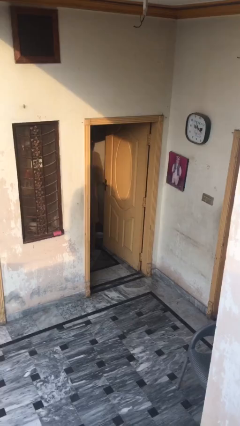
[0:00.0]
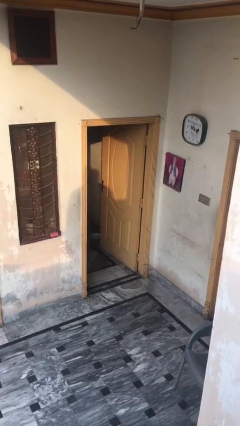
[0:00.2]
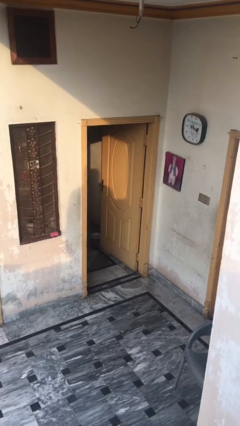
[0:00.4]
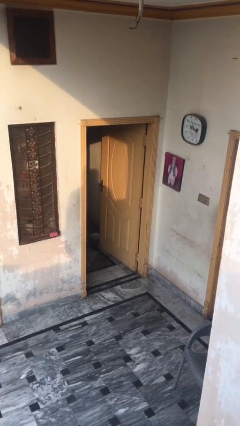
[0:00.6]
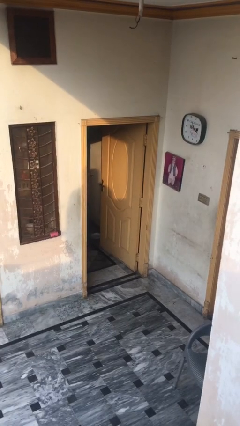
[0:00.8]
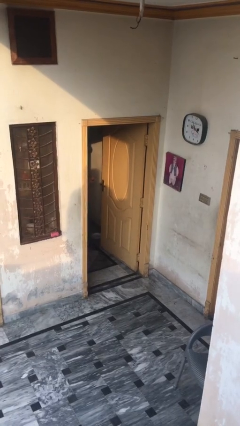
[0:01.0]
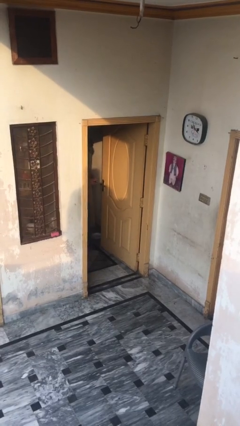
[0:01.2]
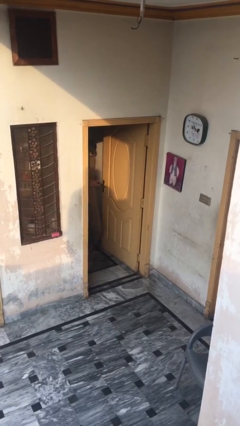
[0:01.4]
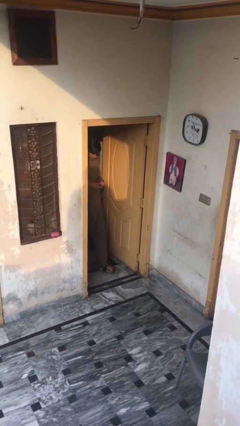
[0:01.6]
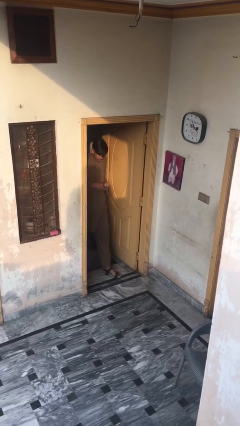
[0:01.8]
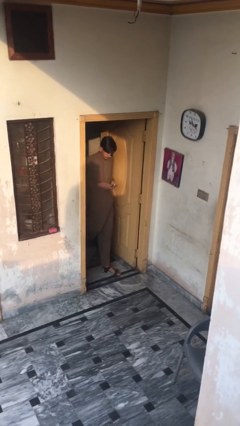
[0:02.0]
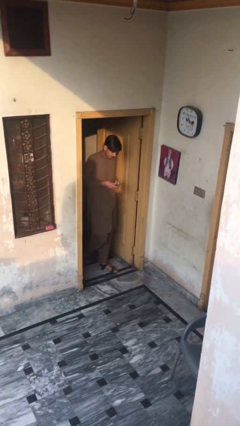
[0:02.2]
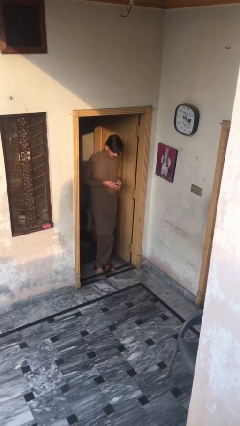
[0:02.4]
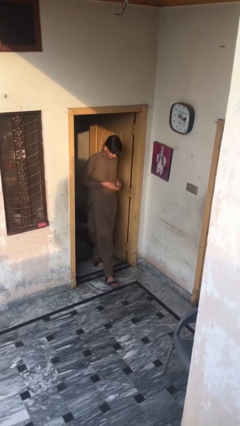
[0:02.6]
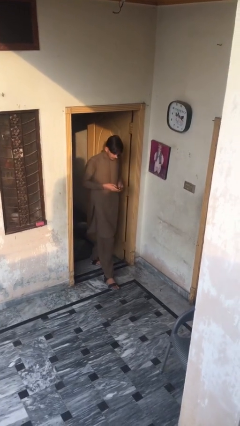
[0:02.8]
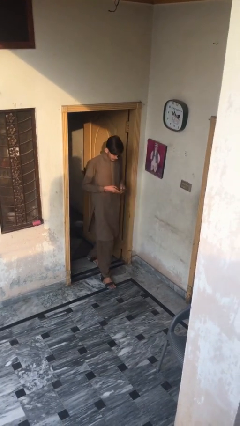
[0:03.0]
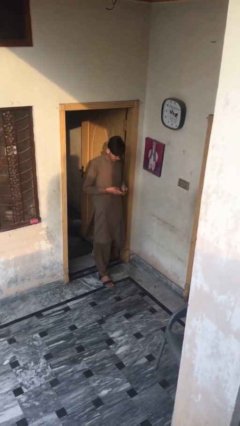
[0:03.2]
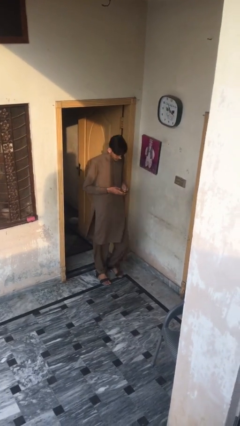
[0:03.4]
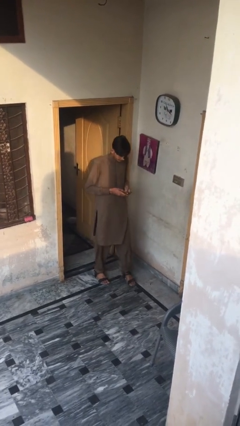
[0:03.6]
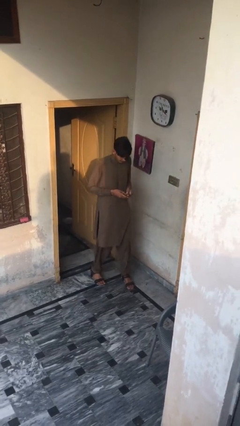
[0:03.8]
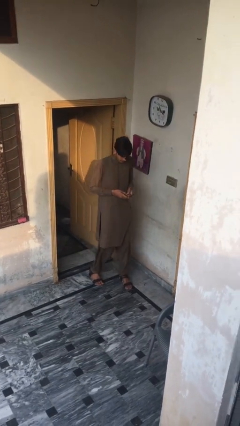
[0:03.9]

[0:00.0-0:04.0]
person enters scene through structure

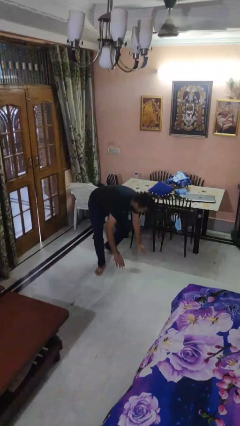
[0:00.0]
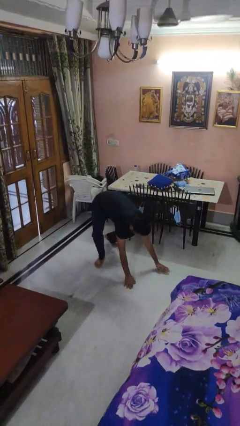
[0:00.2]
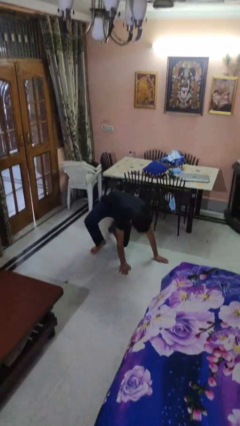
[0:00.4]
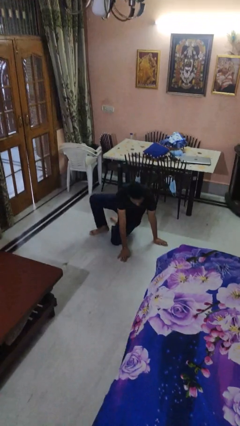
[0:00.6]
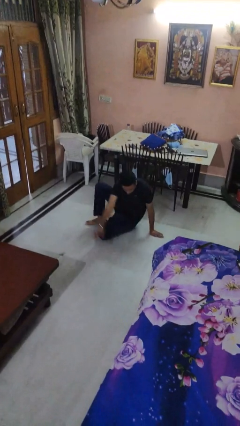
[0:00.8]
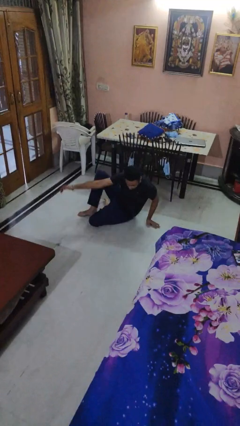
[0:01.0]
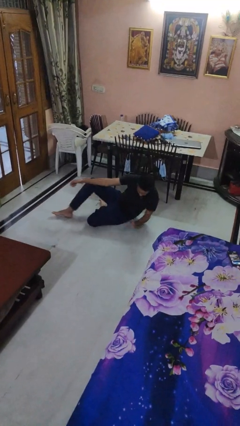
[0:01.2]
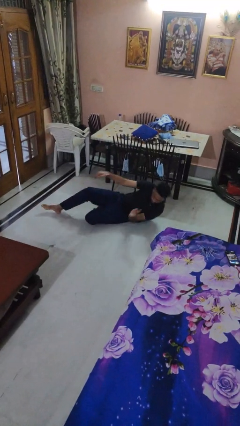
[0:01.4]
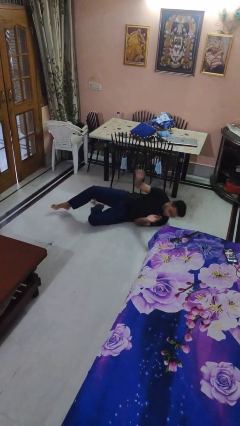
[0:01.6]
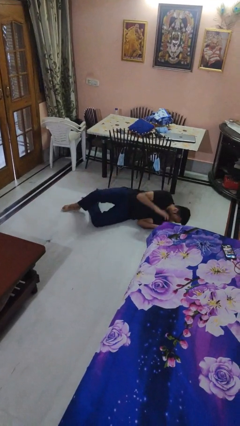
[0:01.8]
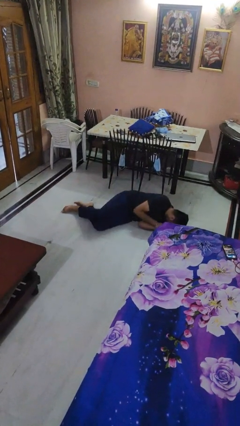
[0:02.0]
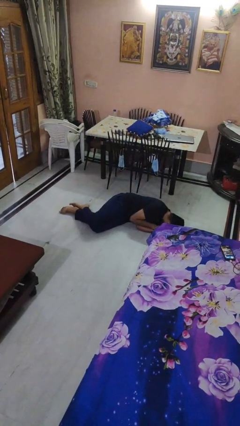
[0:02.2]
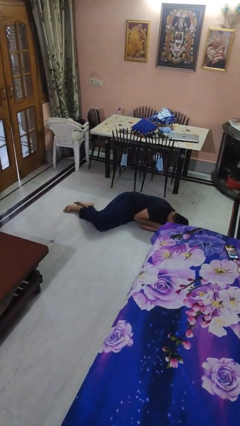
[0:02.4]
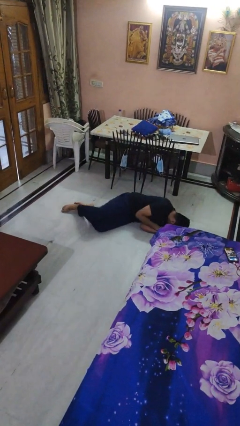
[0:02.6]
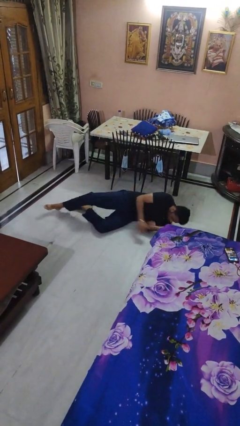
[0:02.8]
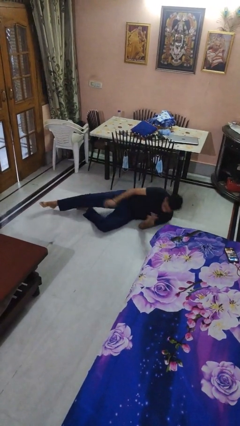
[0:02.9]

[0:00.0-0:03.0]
person lies down on floor

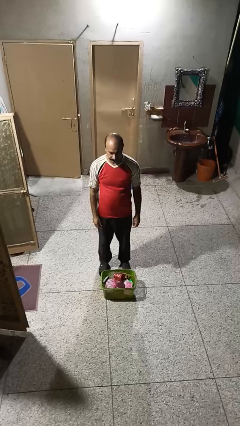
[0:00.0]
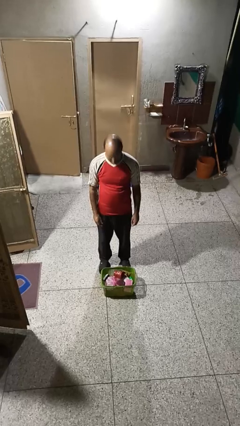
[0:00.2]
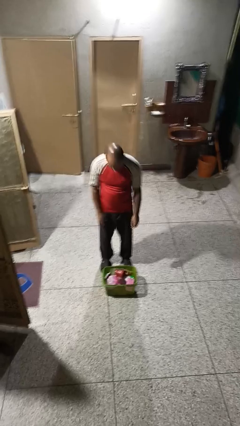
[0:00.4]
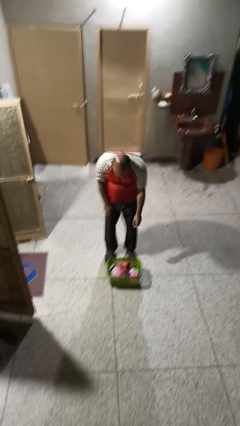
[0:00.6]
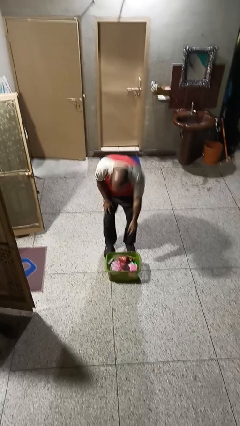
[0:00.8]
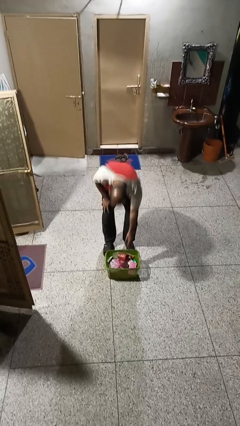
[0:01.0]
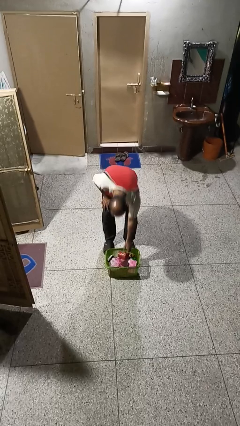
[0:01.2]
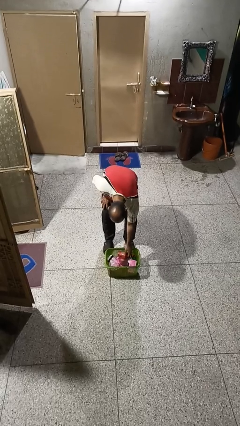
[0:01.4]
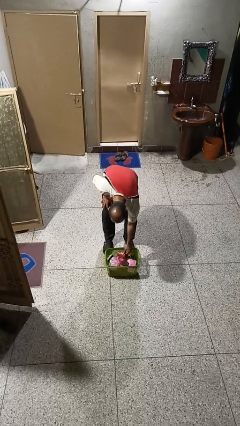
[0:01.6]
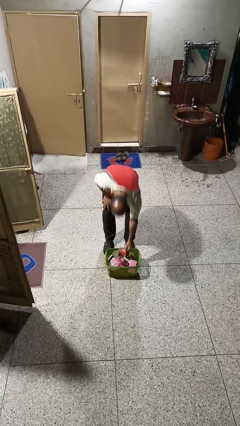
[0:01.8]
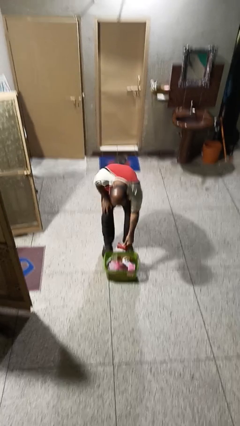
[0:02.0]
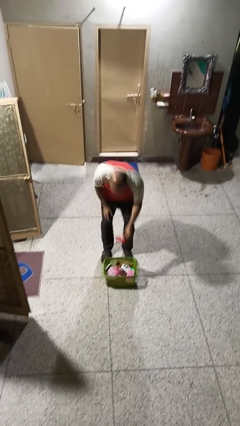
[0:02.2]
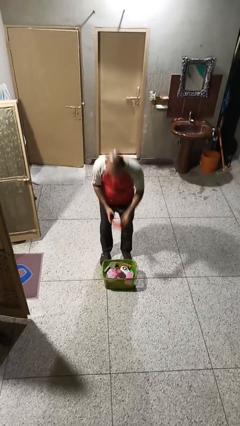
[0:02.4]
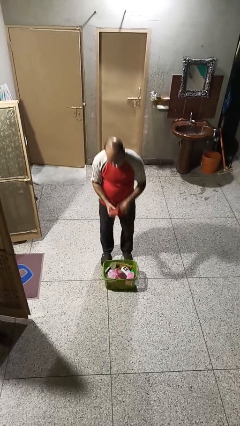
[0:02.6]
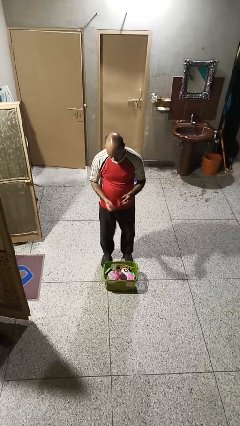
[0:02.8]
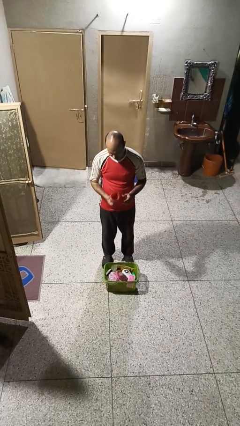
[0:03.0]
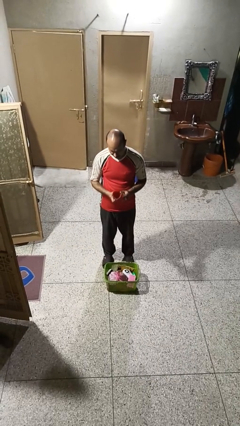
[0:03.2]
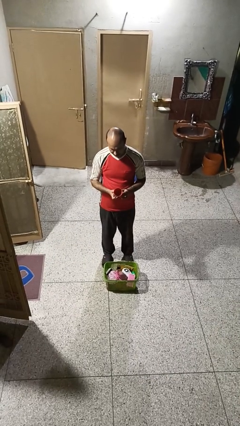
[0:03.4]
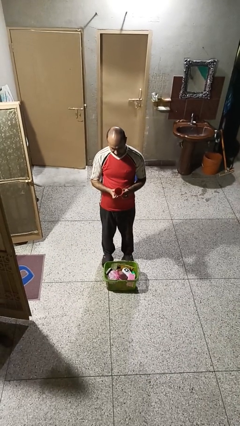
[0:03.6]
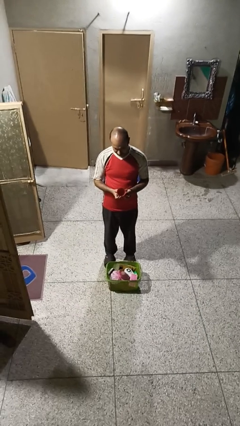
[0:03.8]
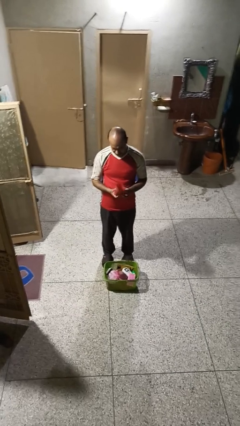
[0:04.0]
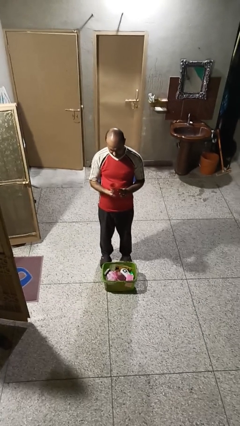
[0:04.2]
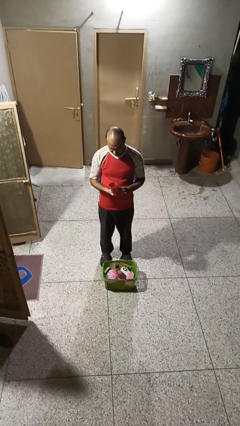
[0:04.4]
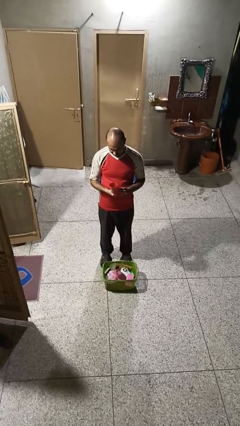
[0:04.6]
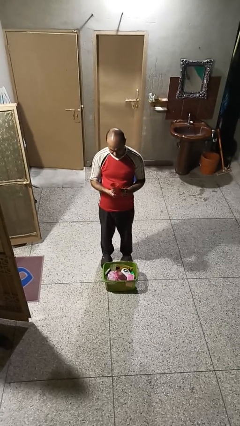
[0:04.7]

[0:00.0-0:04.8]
person takes object from basket

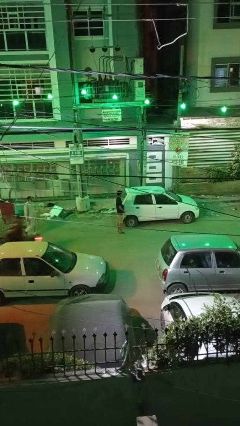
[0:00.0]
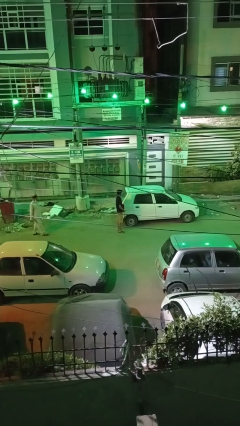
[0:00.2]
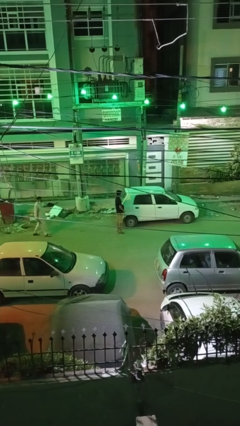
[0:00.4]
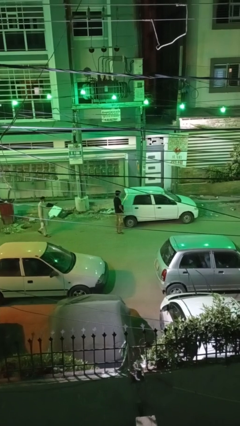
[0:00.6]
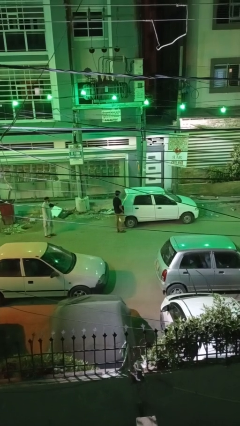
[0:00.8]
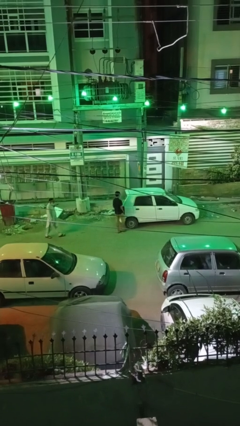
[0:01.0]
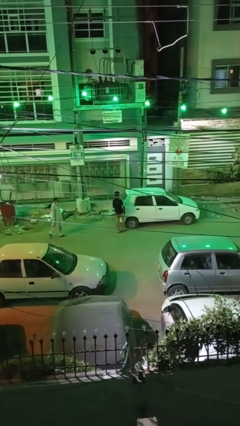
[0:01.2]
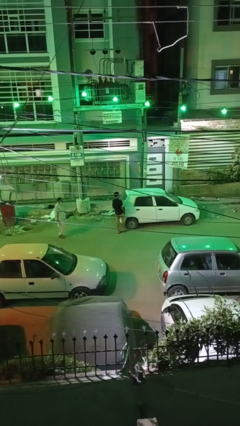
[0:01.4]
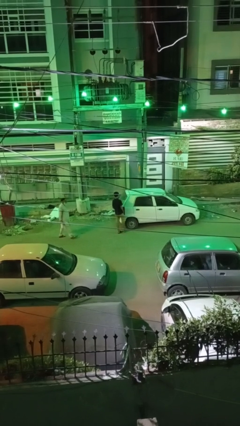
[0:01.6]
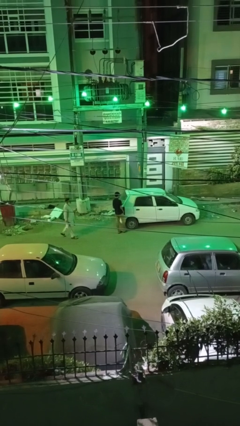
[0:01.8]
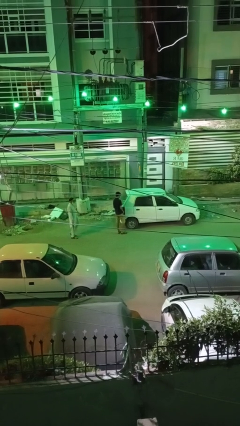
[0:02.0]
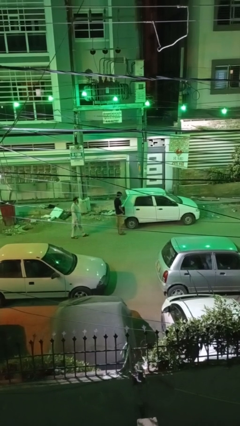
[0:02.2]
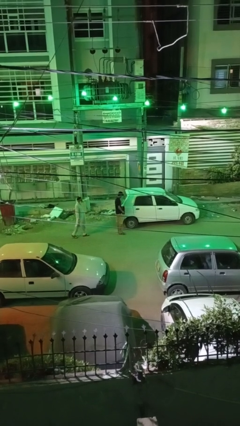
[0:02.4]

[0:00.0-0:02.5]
person kicks car tires

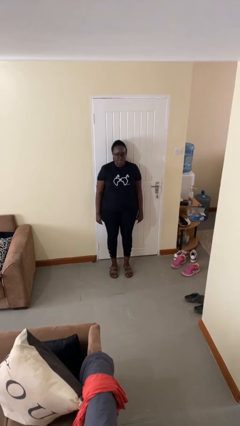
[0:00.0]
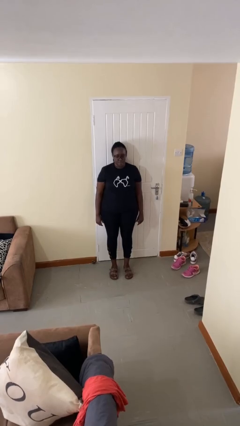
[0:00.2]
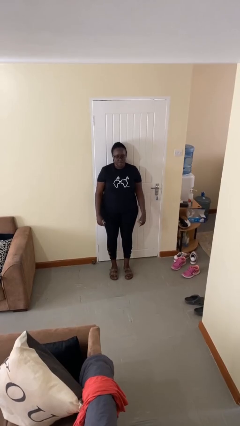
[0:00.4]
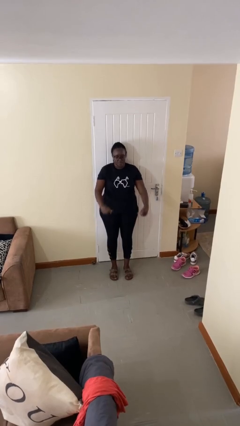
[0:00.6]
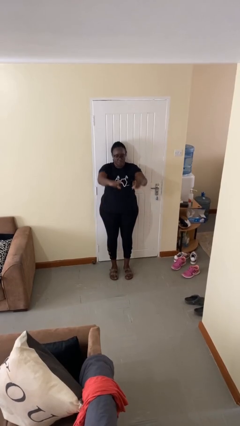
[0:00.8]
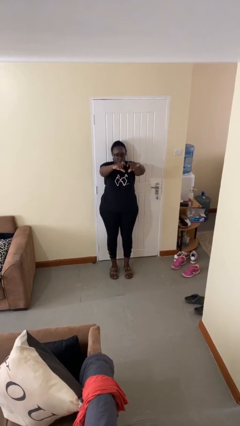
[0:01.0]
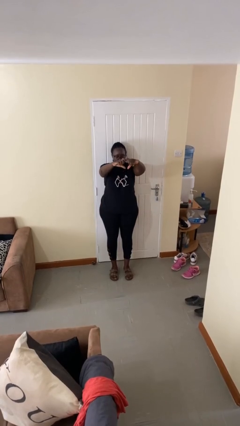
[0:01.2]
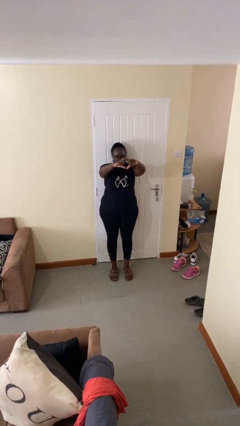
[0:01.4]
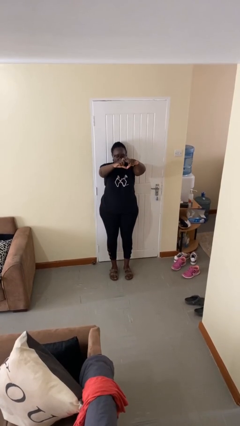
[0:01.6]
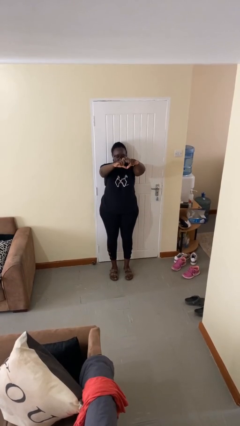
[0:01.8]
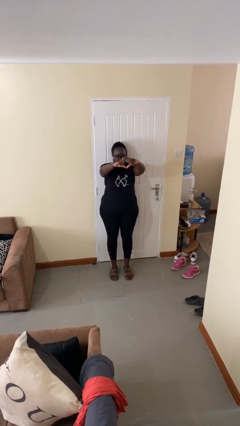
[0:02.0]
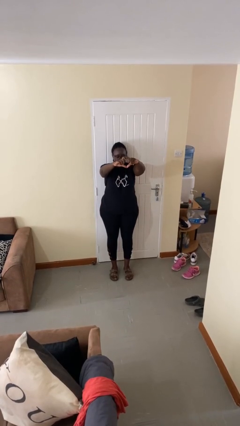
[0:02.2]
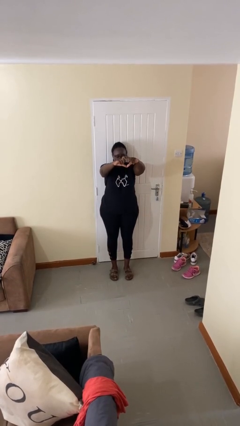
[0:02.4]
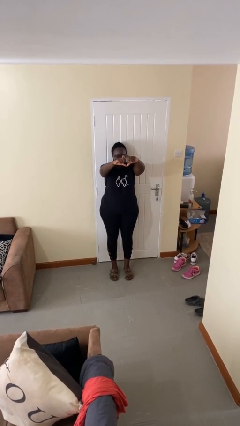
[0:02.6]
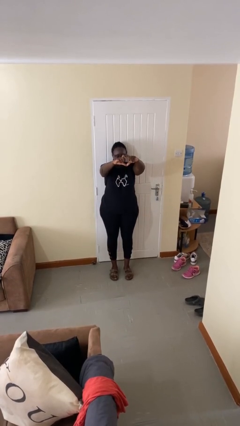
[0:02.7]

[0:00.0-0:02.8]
person gestures heart

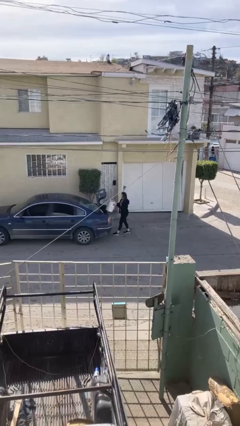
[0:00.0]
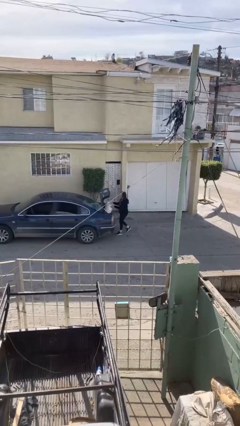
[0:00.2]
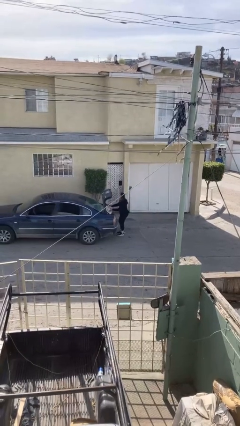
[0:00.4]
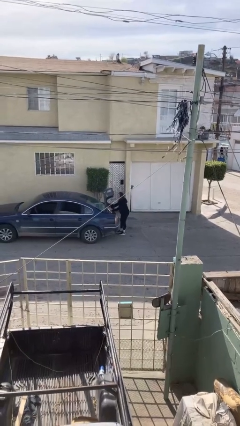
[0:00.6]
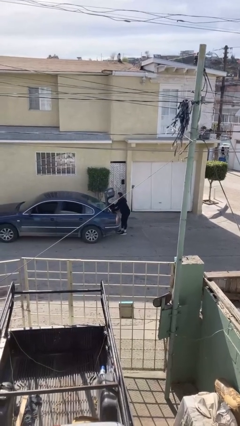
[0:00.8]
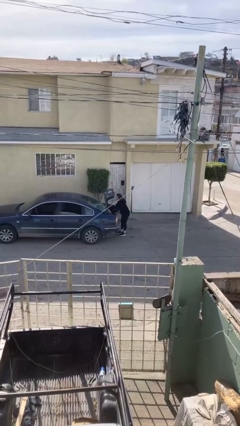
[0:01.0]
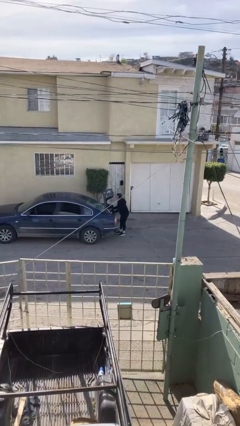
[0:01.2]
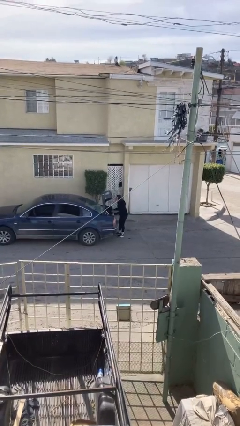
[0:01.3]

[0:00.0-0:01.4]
person loads car
